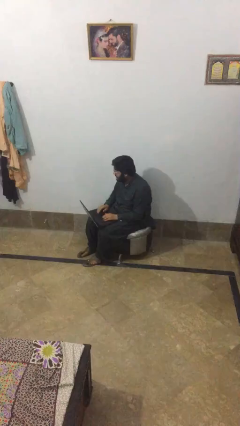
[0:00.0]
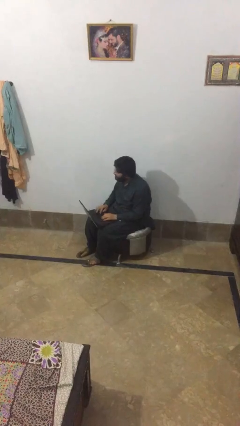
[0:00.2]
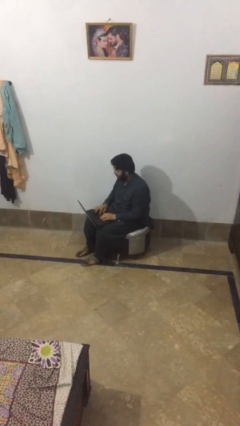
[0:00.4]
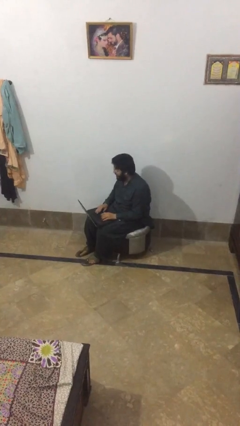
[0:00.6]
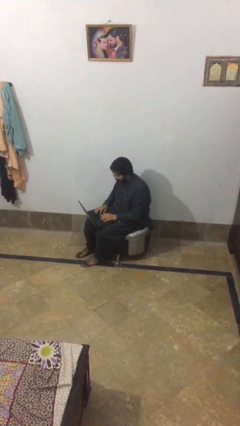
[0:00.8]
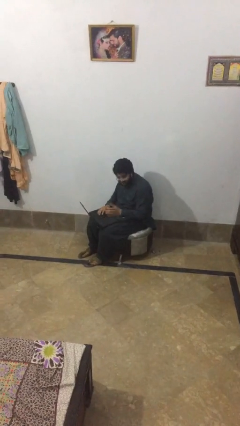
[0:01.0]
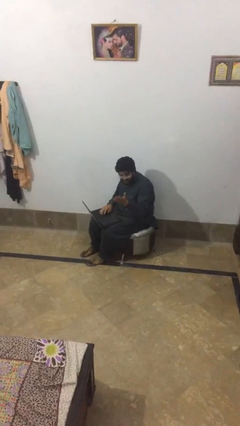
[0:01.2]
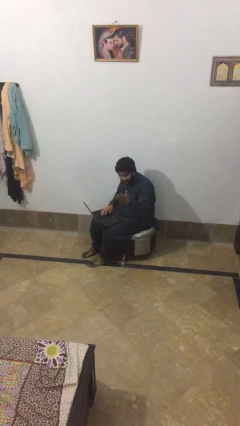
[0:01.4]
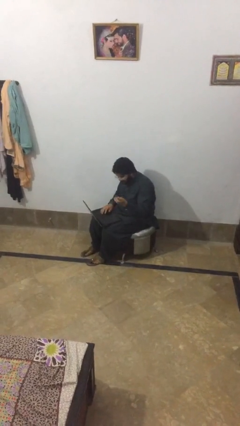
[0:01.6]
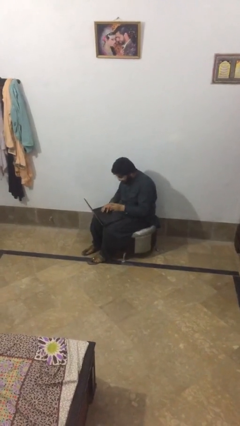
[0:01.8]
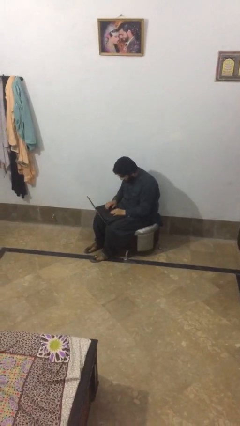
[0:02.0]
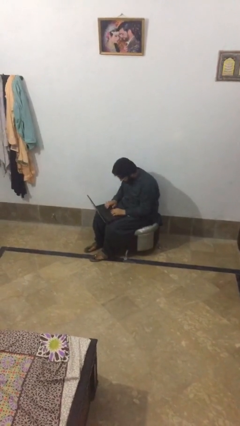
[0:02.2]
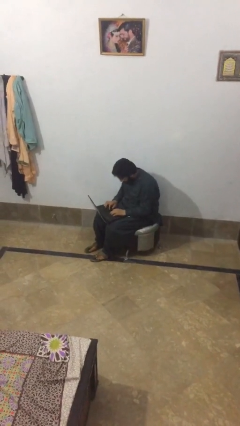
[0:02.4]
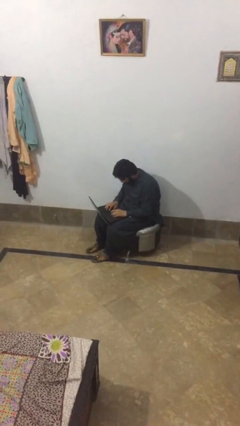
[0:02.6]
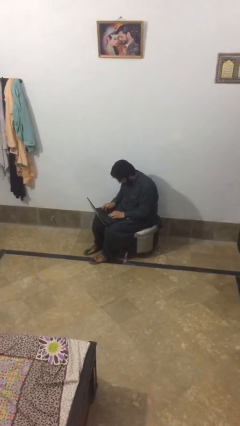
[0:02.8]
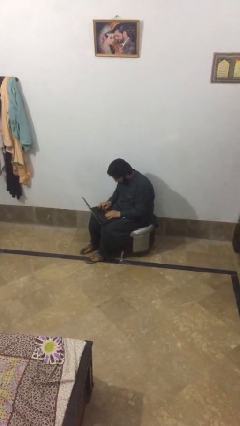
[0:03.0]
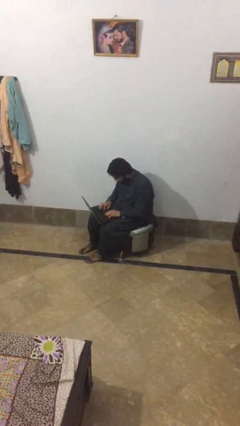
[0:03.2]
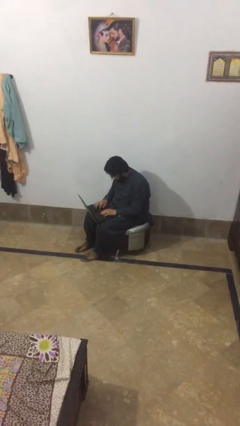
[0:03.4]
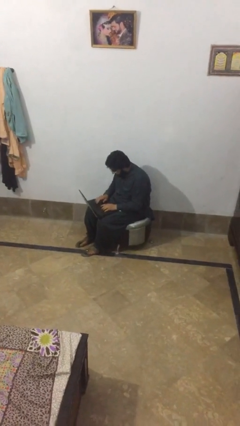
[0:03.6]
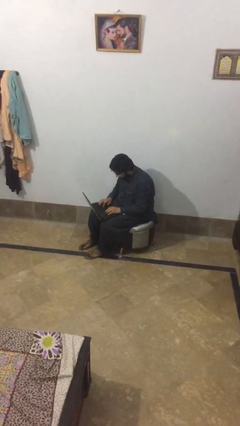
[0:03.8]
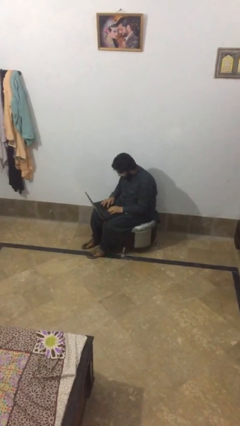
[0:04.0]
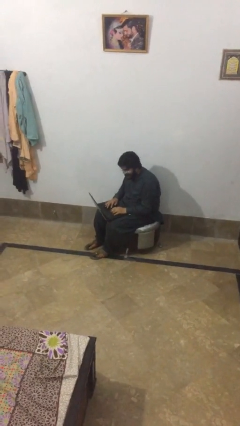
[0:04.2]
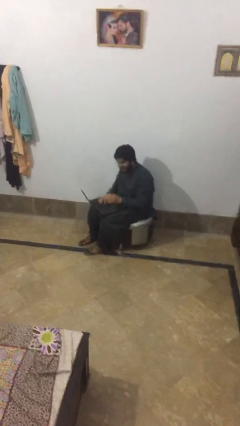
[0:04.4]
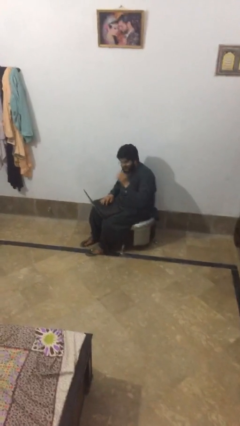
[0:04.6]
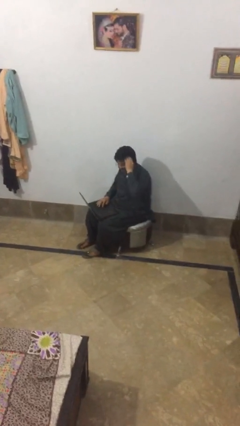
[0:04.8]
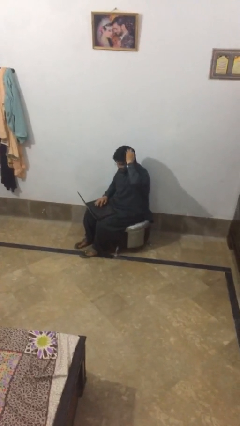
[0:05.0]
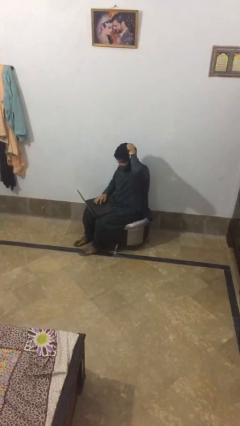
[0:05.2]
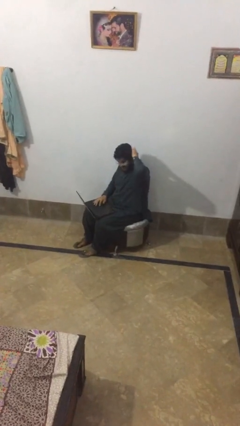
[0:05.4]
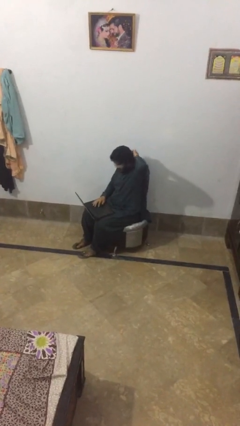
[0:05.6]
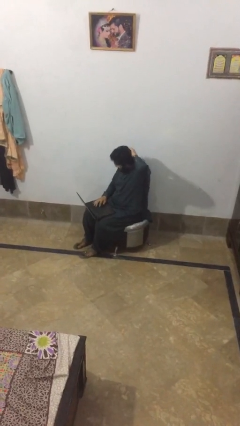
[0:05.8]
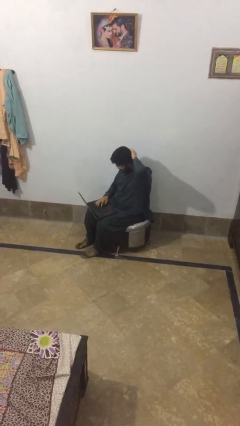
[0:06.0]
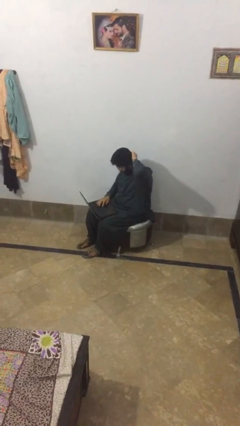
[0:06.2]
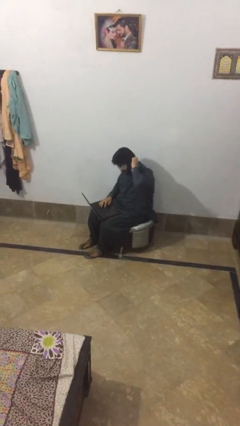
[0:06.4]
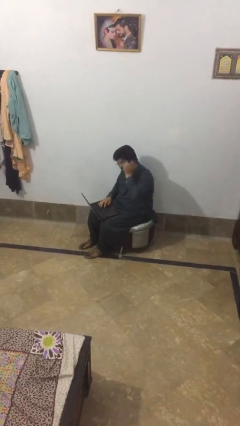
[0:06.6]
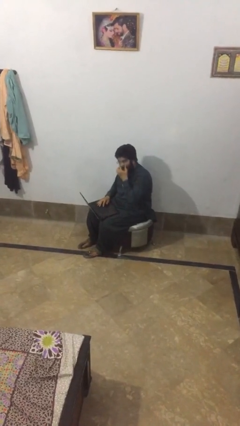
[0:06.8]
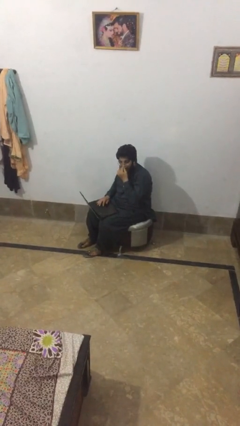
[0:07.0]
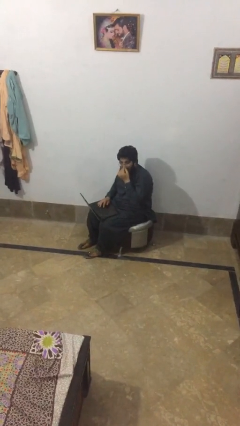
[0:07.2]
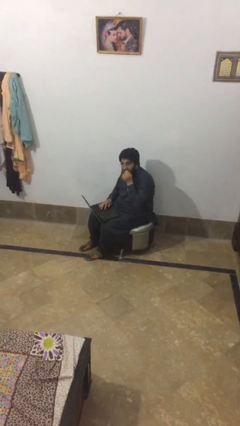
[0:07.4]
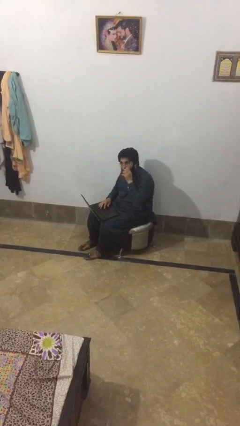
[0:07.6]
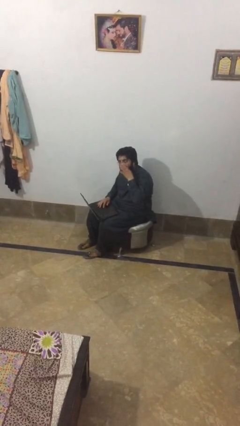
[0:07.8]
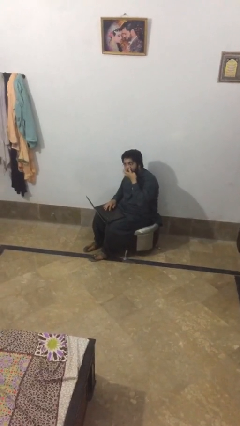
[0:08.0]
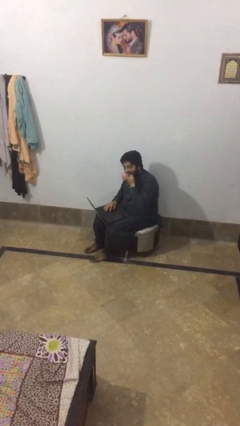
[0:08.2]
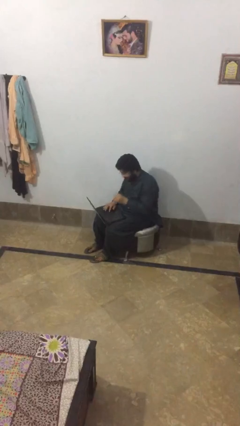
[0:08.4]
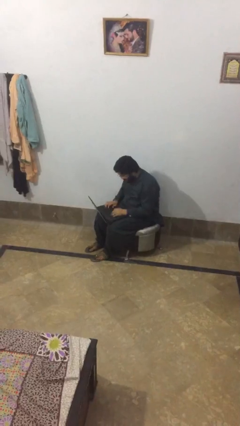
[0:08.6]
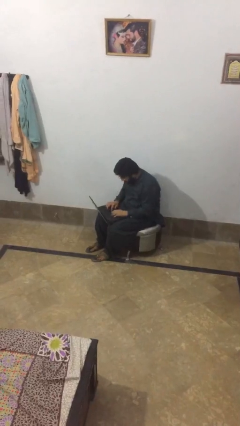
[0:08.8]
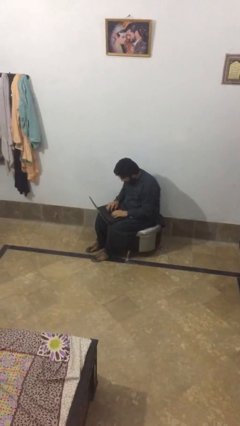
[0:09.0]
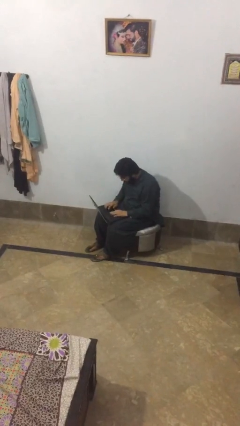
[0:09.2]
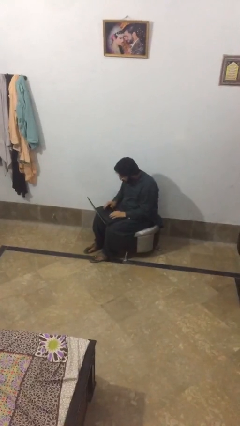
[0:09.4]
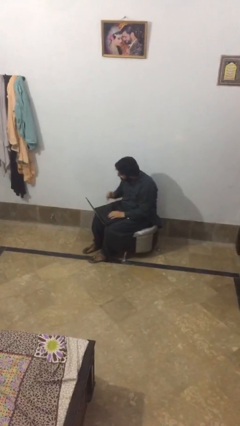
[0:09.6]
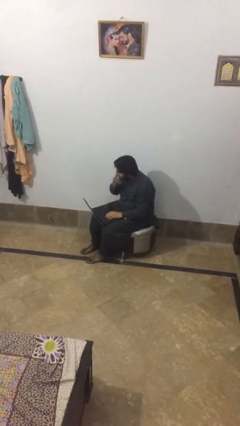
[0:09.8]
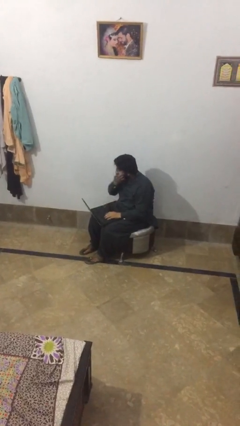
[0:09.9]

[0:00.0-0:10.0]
person interacts with laptop

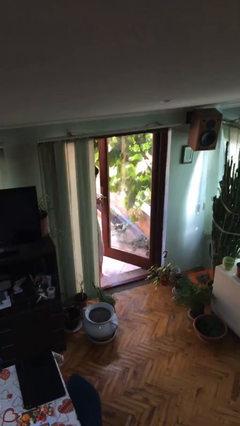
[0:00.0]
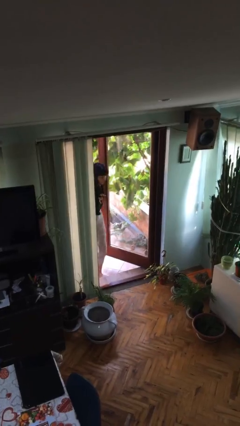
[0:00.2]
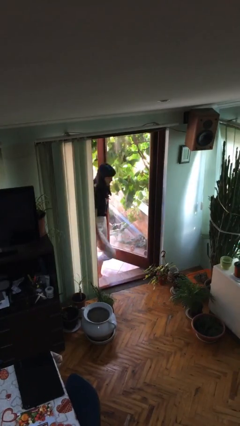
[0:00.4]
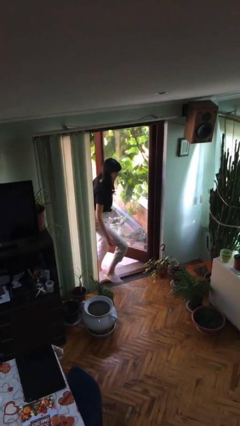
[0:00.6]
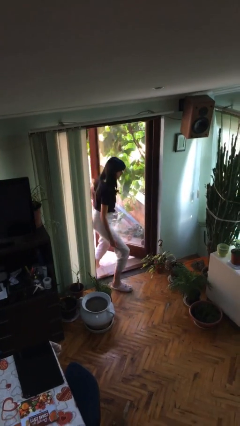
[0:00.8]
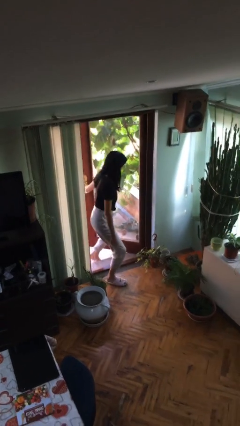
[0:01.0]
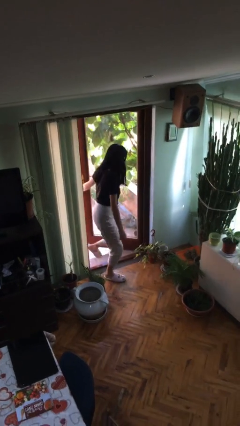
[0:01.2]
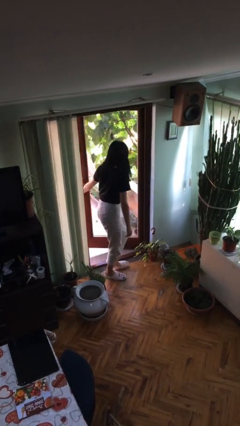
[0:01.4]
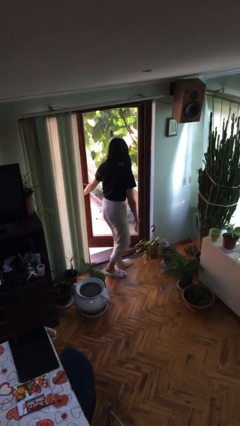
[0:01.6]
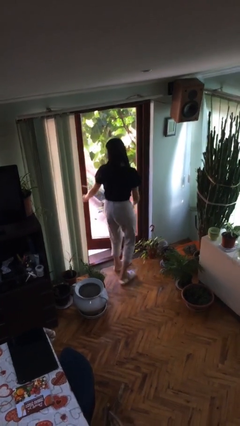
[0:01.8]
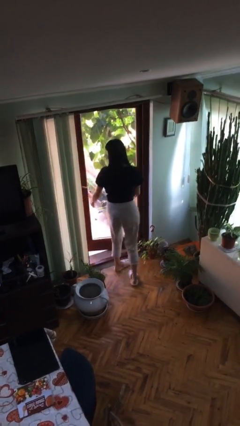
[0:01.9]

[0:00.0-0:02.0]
person enters scene through structure

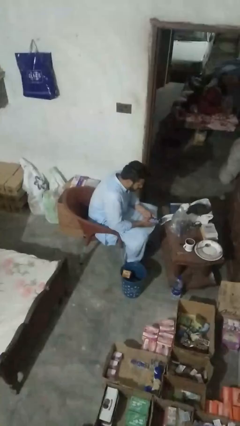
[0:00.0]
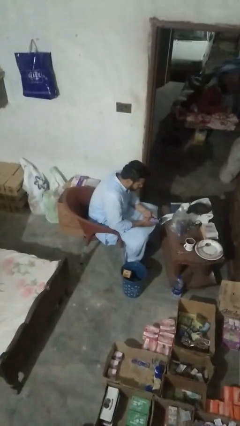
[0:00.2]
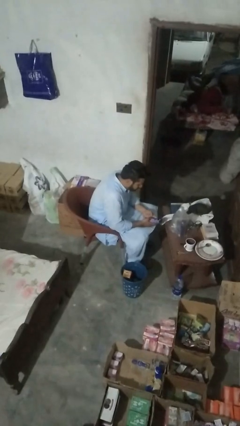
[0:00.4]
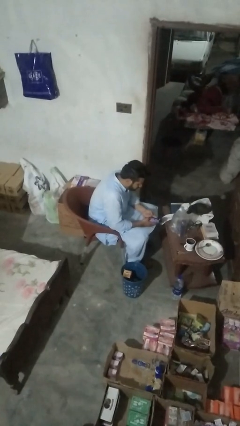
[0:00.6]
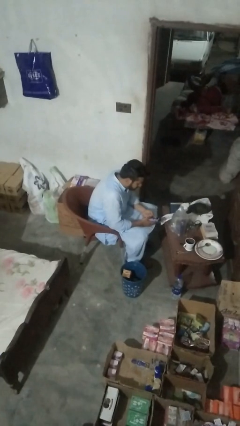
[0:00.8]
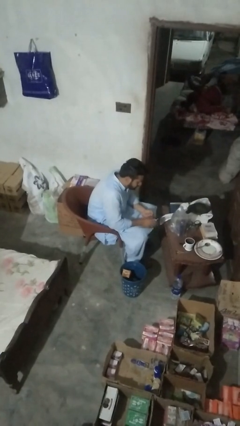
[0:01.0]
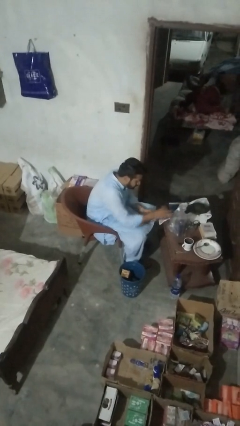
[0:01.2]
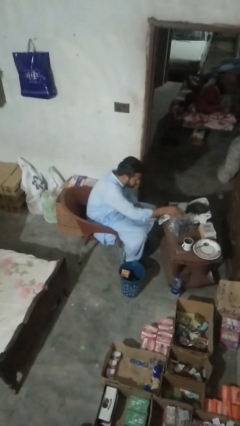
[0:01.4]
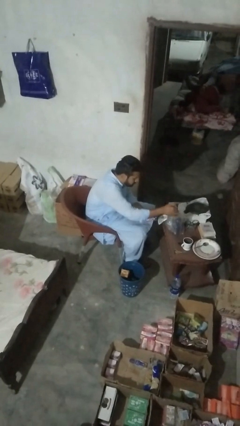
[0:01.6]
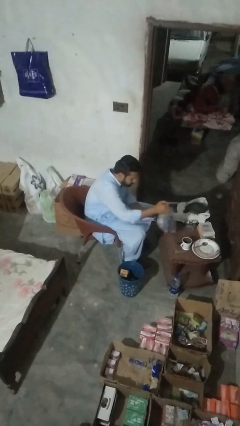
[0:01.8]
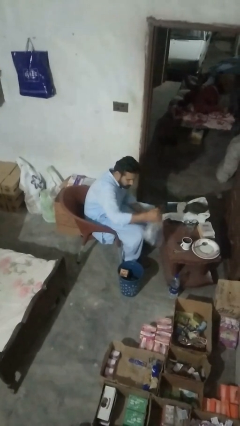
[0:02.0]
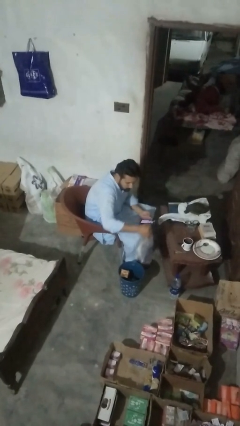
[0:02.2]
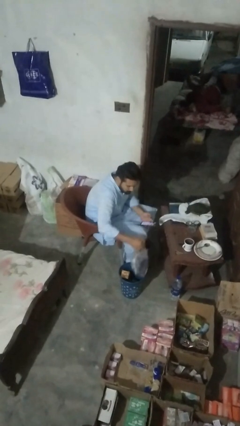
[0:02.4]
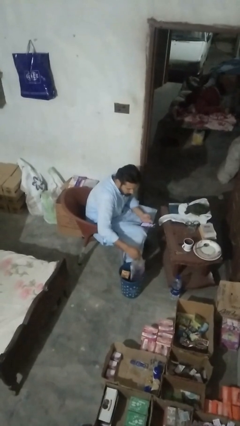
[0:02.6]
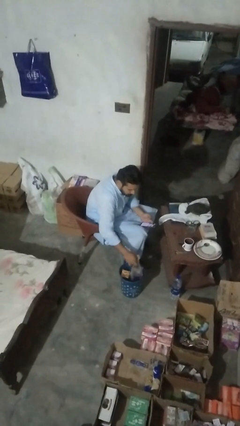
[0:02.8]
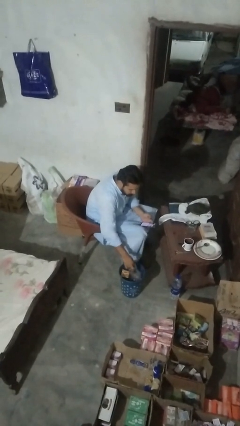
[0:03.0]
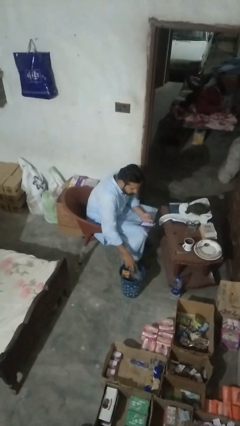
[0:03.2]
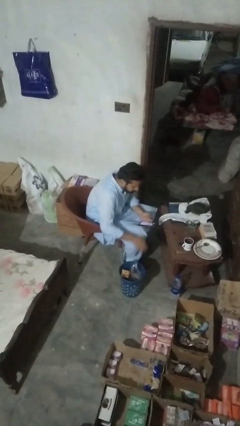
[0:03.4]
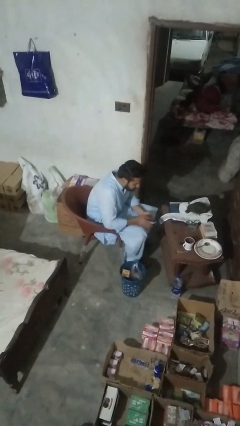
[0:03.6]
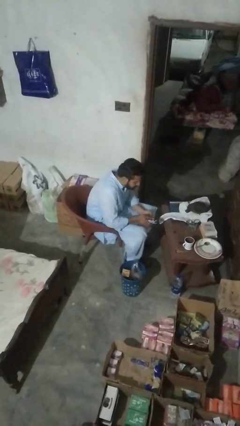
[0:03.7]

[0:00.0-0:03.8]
person removes trashbag from trashcan

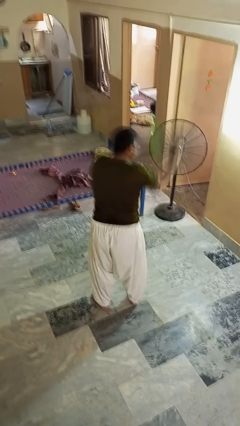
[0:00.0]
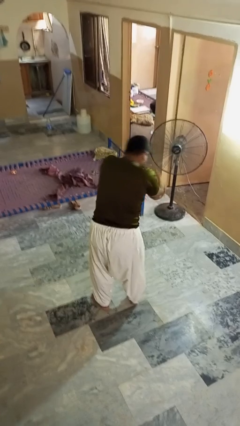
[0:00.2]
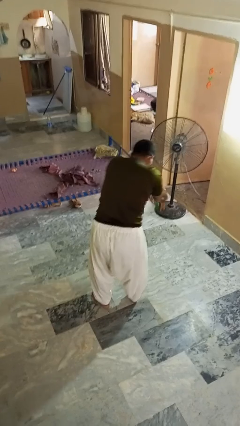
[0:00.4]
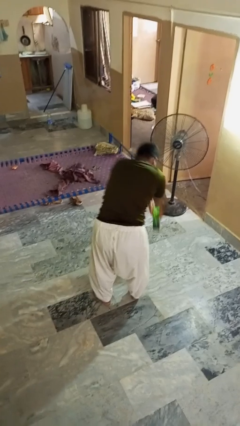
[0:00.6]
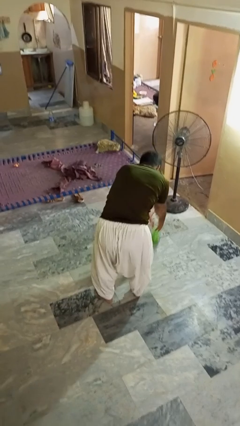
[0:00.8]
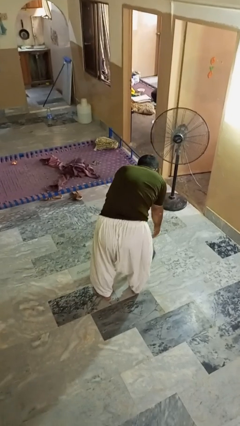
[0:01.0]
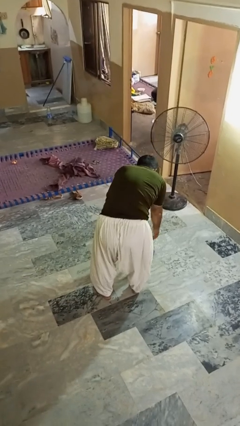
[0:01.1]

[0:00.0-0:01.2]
person catches dropped object

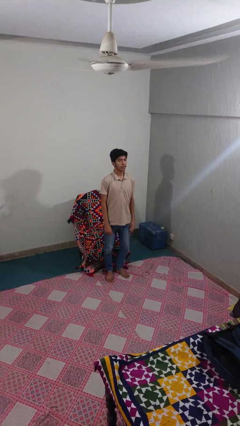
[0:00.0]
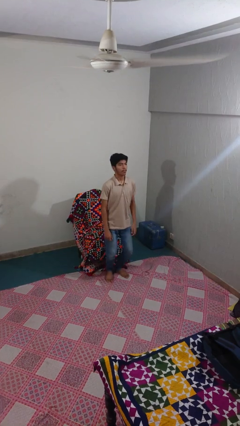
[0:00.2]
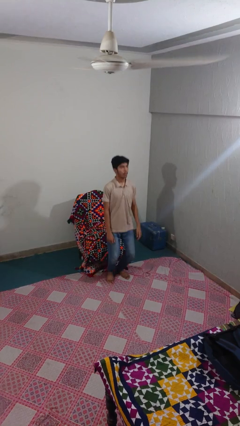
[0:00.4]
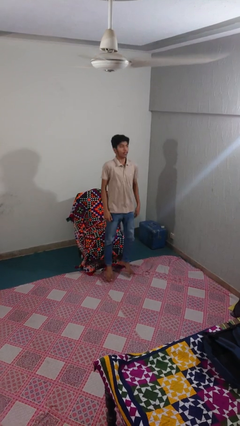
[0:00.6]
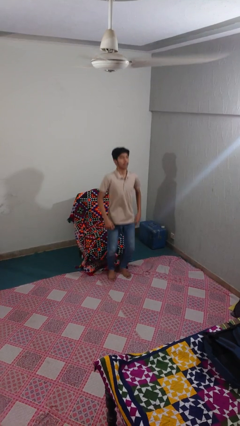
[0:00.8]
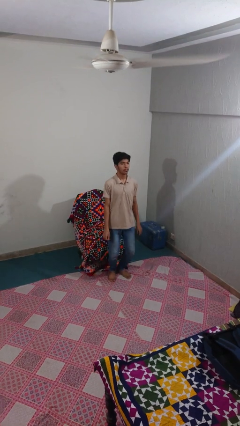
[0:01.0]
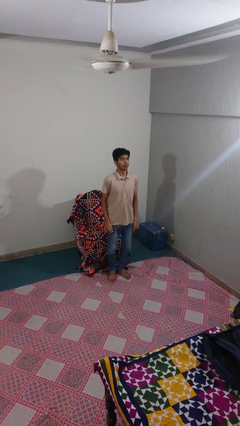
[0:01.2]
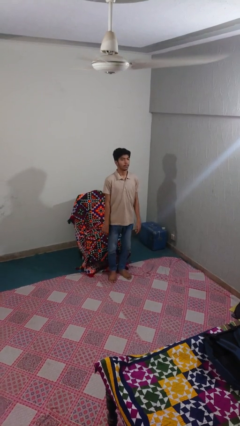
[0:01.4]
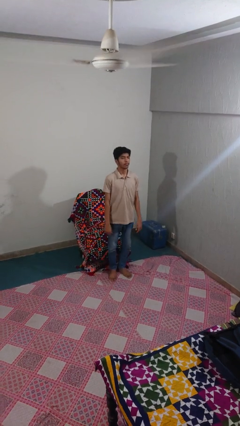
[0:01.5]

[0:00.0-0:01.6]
person jumps
